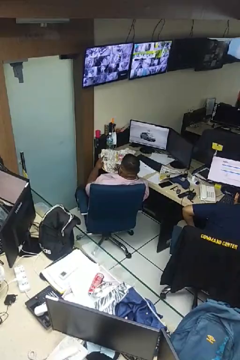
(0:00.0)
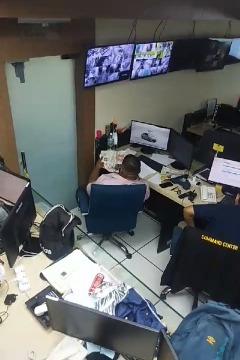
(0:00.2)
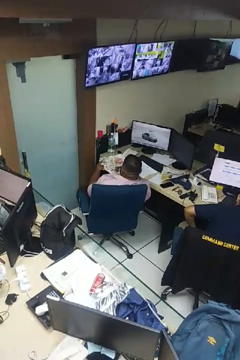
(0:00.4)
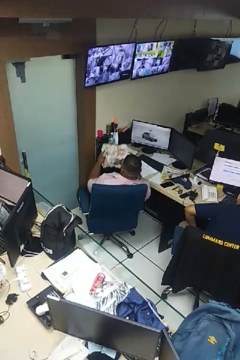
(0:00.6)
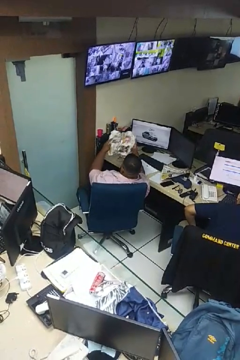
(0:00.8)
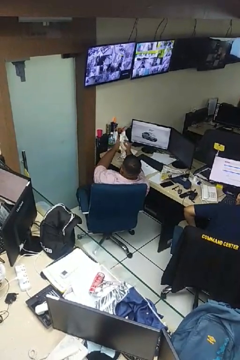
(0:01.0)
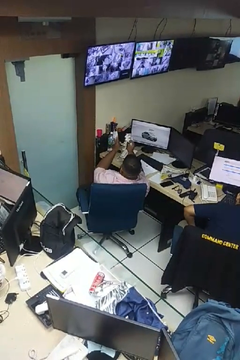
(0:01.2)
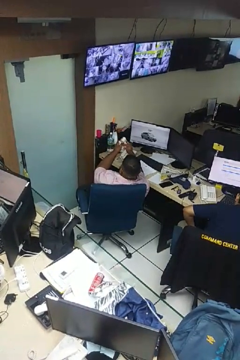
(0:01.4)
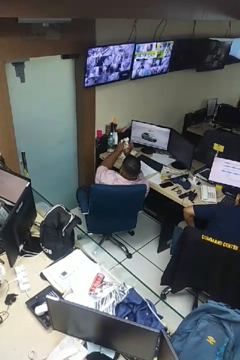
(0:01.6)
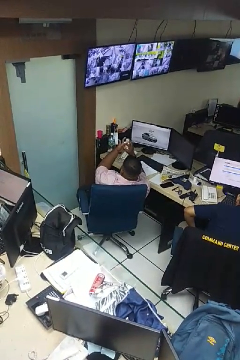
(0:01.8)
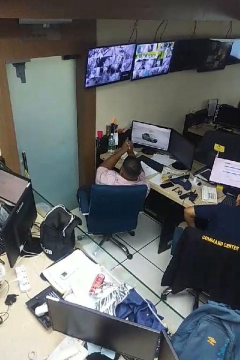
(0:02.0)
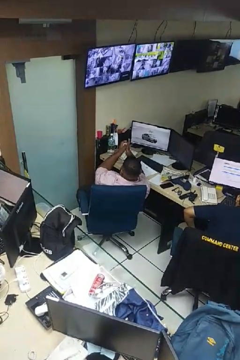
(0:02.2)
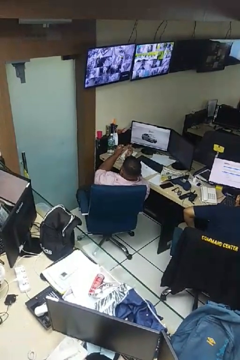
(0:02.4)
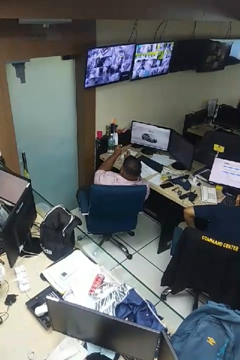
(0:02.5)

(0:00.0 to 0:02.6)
person crumples paper

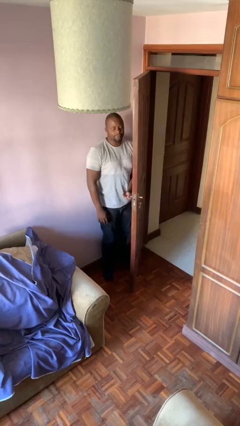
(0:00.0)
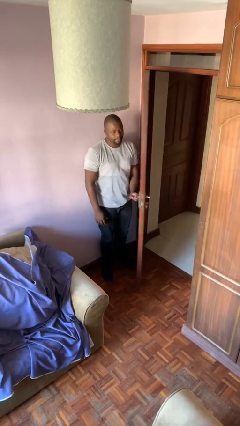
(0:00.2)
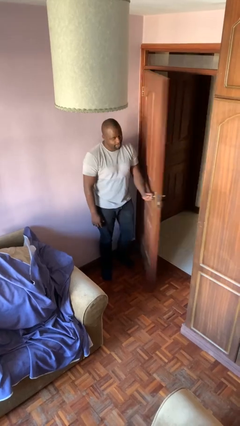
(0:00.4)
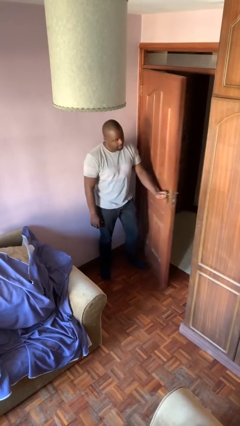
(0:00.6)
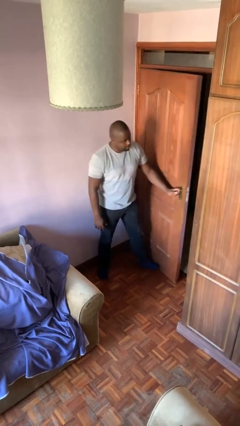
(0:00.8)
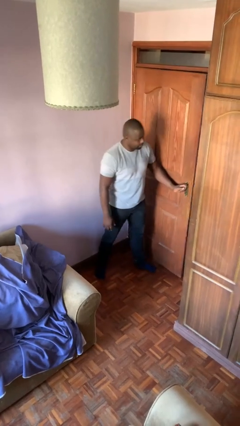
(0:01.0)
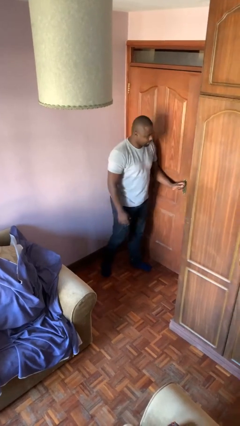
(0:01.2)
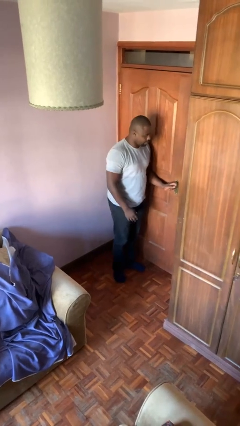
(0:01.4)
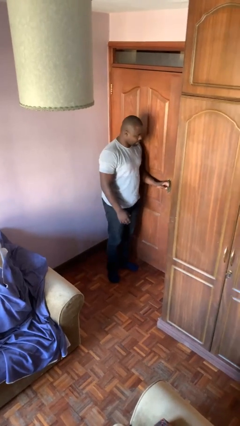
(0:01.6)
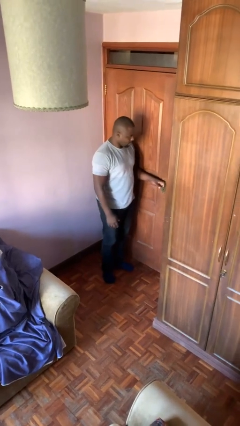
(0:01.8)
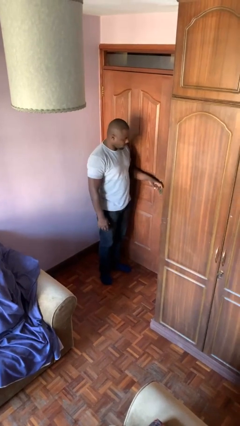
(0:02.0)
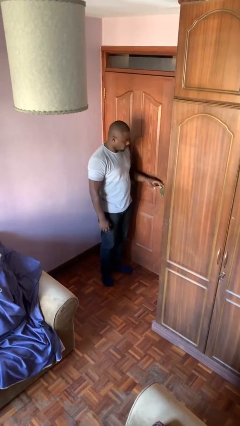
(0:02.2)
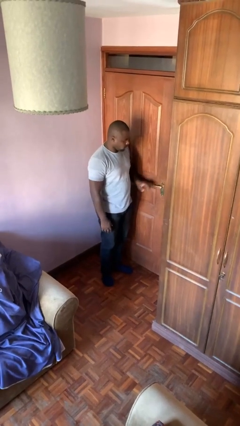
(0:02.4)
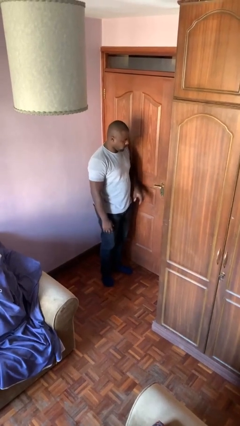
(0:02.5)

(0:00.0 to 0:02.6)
person closes facility door

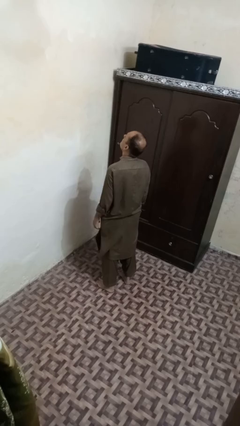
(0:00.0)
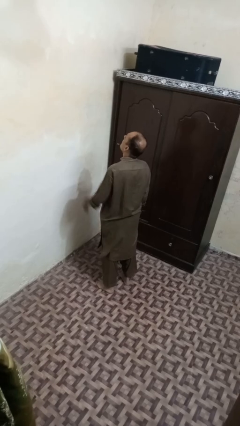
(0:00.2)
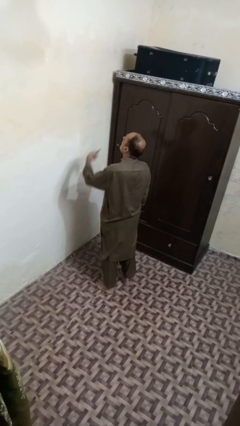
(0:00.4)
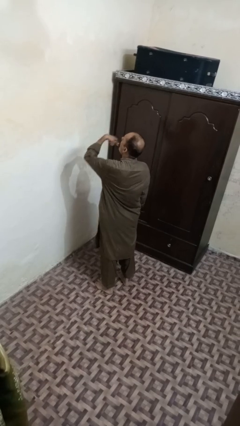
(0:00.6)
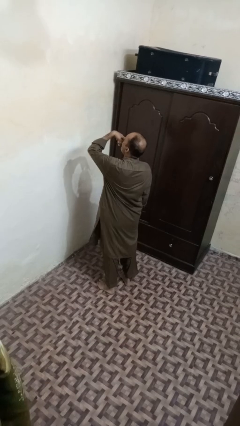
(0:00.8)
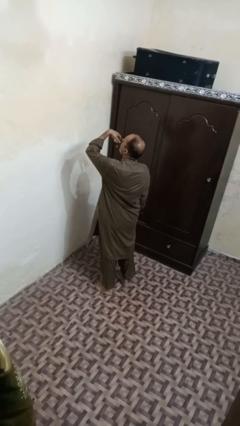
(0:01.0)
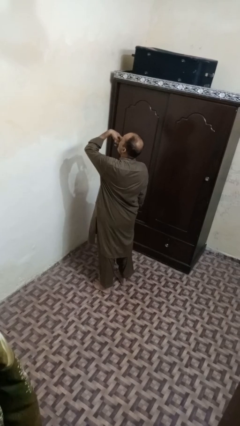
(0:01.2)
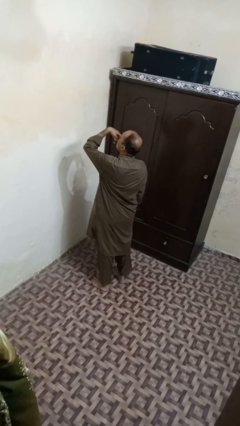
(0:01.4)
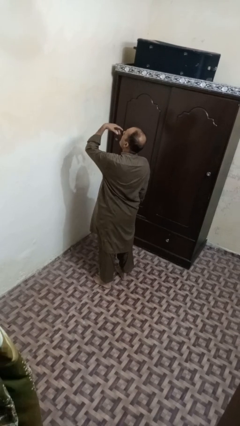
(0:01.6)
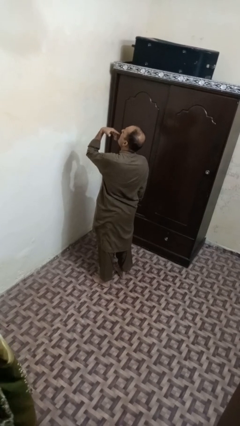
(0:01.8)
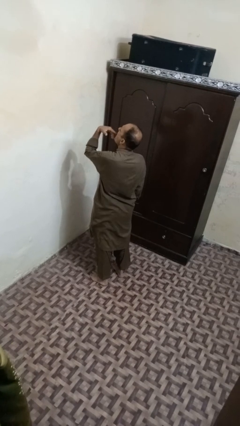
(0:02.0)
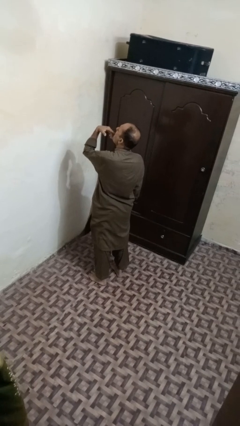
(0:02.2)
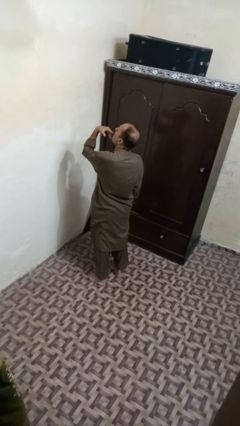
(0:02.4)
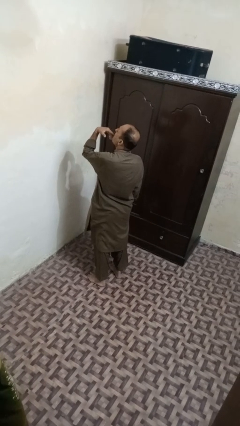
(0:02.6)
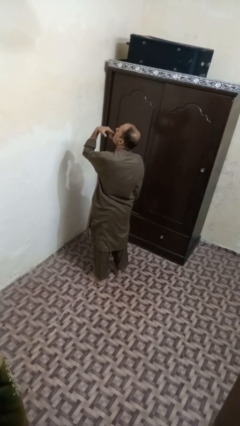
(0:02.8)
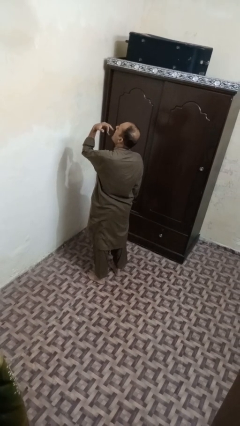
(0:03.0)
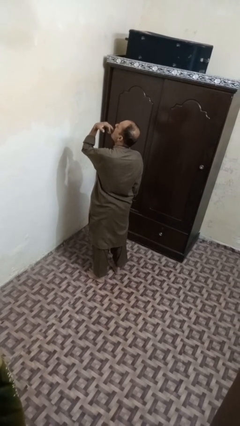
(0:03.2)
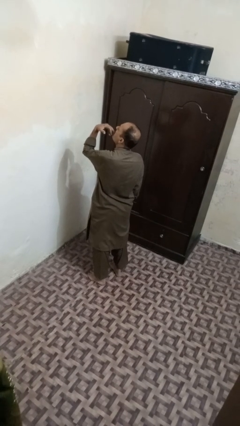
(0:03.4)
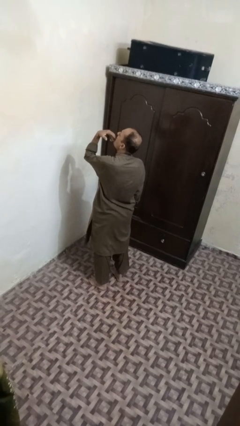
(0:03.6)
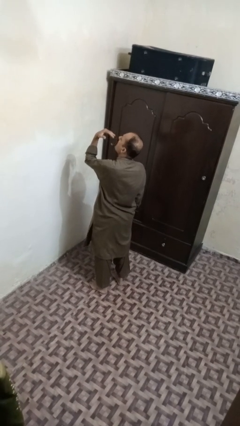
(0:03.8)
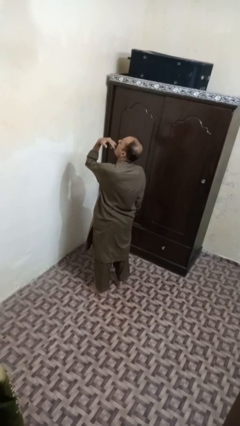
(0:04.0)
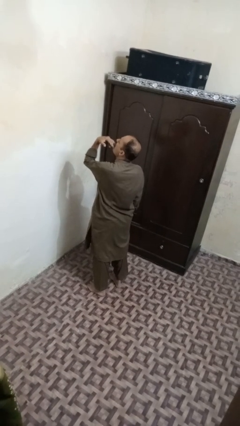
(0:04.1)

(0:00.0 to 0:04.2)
person licks fingers

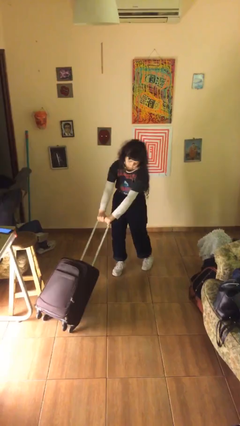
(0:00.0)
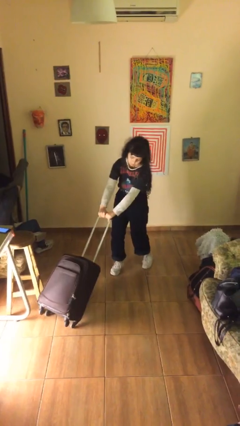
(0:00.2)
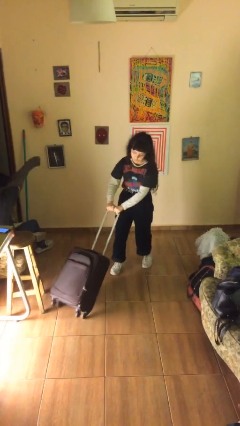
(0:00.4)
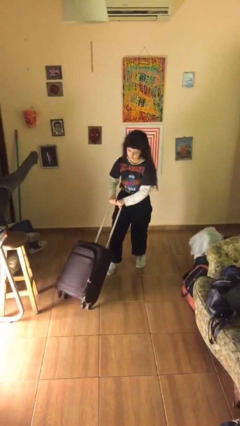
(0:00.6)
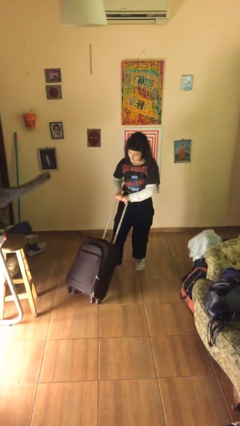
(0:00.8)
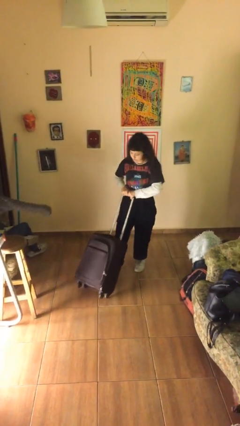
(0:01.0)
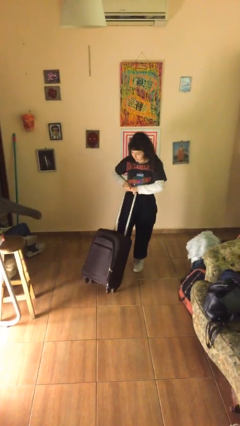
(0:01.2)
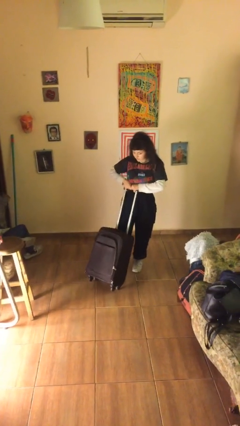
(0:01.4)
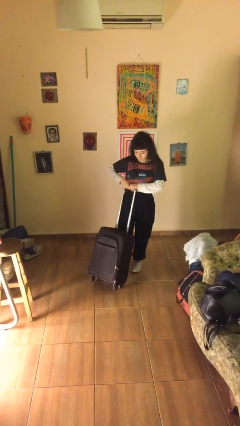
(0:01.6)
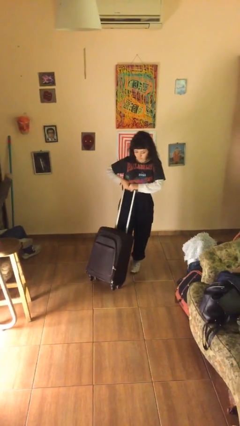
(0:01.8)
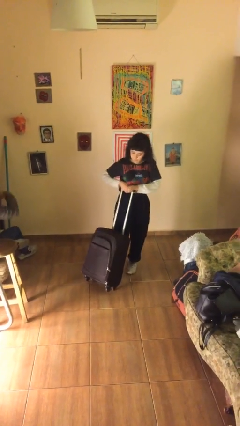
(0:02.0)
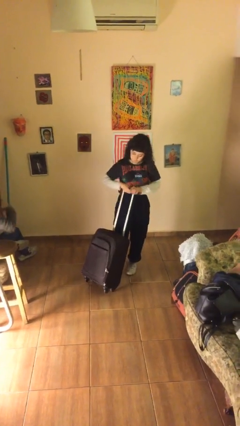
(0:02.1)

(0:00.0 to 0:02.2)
person pulls wheeled cart

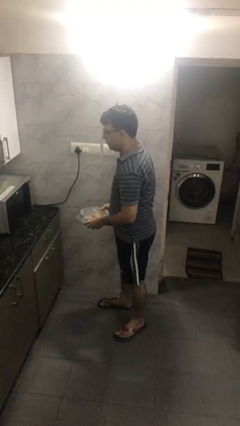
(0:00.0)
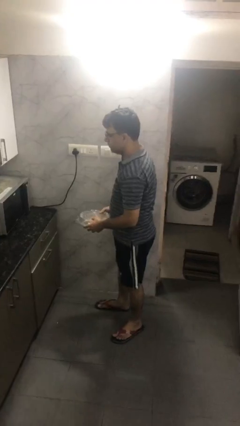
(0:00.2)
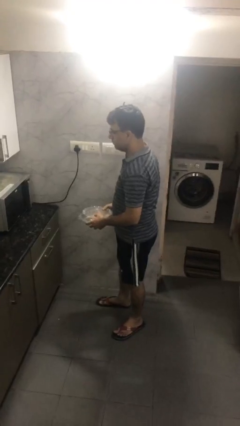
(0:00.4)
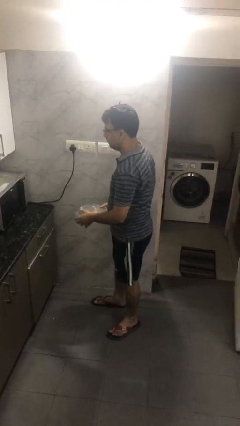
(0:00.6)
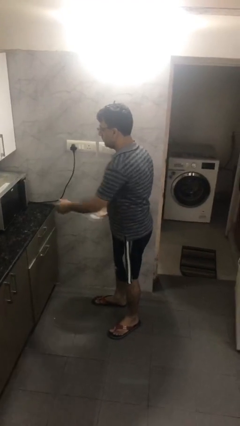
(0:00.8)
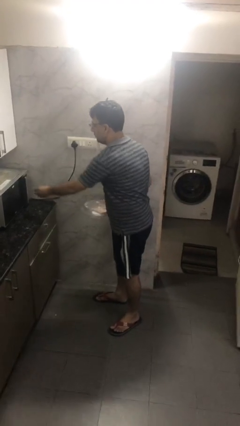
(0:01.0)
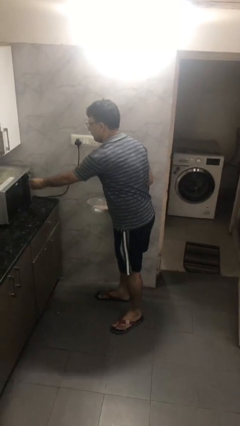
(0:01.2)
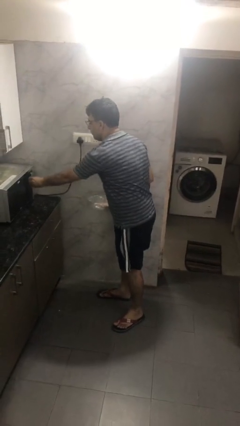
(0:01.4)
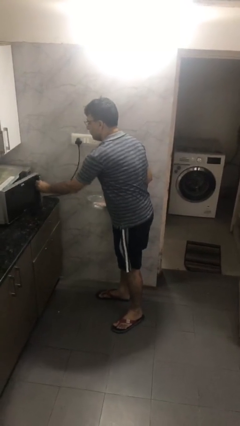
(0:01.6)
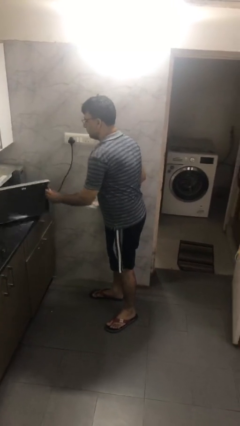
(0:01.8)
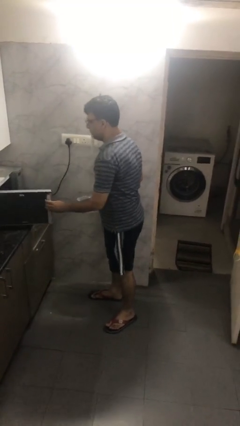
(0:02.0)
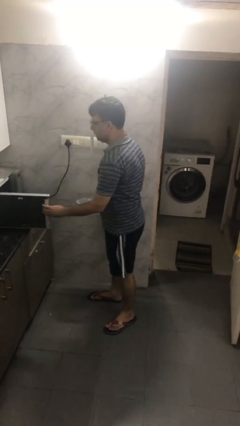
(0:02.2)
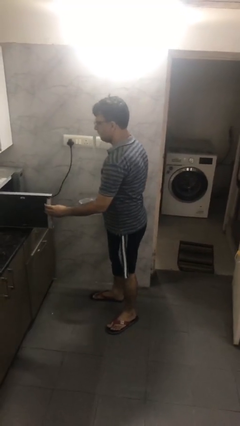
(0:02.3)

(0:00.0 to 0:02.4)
person opens microwave

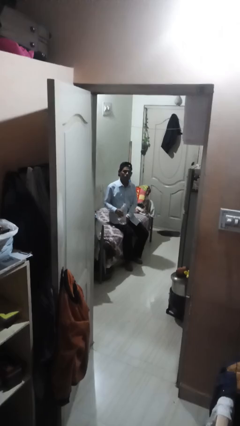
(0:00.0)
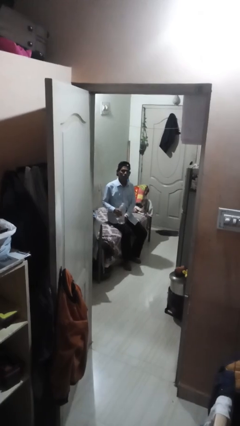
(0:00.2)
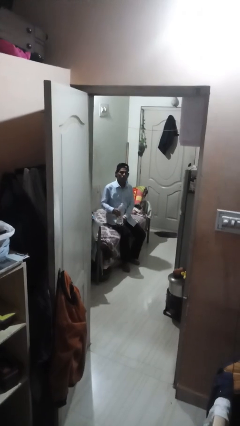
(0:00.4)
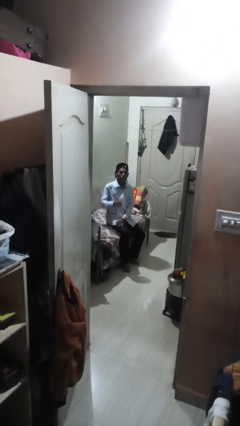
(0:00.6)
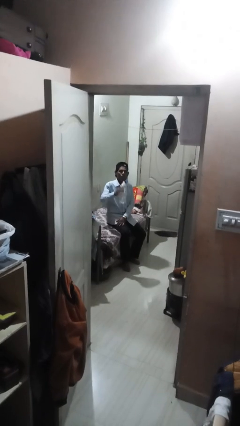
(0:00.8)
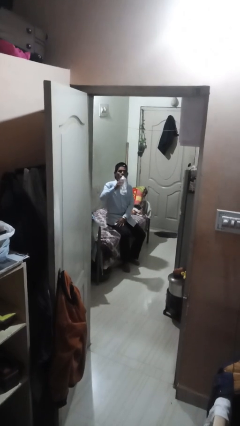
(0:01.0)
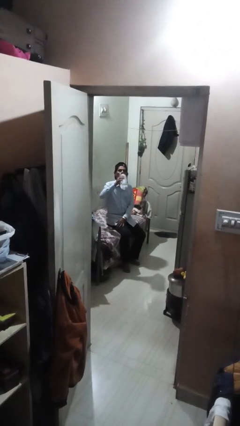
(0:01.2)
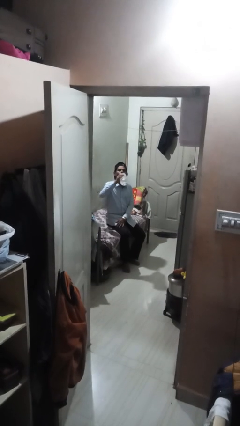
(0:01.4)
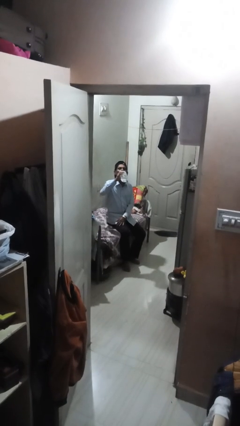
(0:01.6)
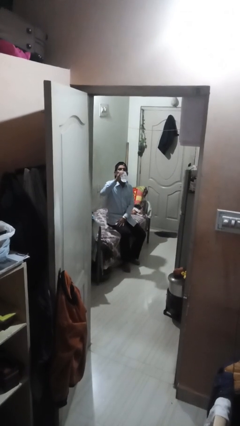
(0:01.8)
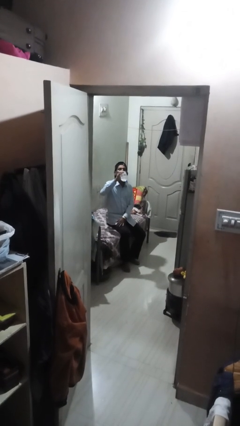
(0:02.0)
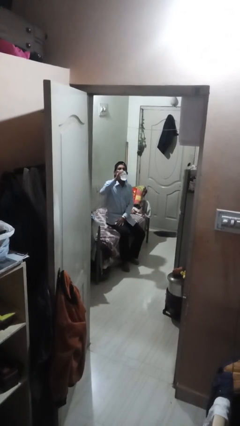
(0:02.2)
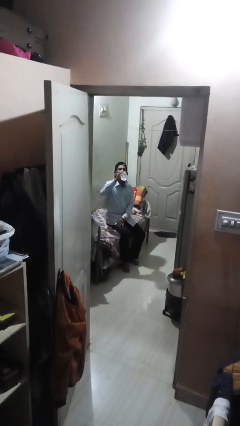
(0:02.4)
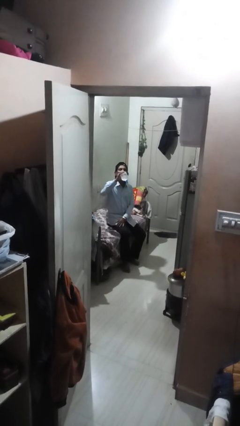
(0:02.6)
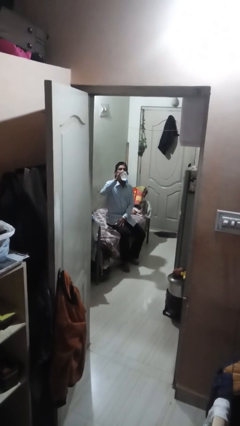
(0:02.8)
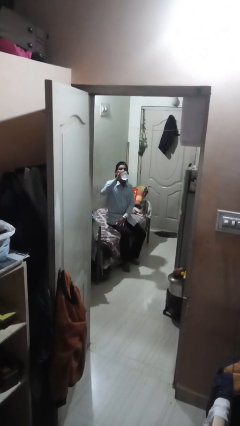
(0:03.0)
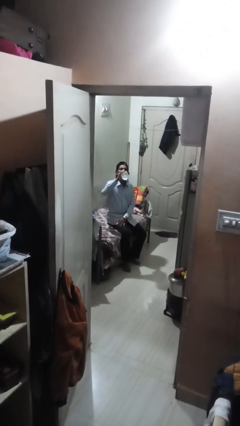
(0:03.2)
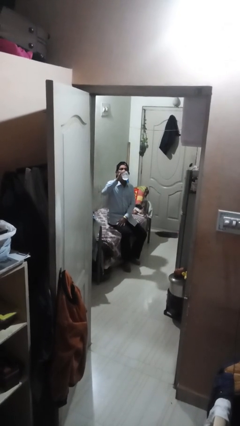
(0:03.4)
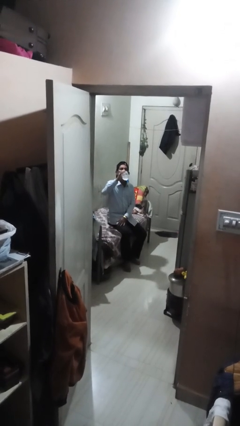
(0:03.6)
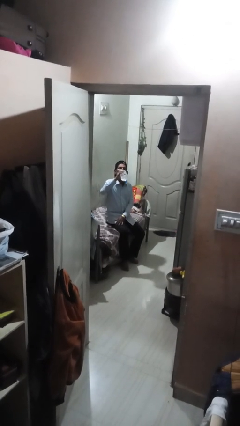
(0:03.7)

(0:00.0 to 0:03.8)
person drinks from bottle
